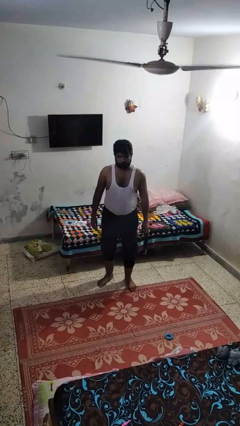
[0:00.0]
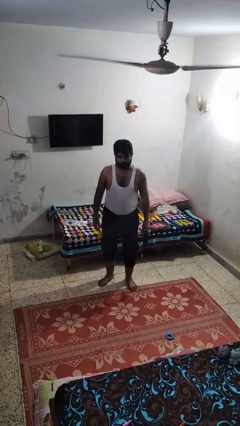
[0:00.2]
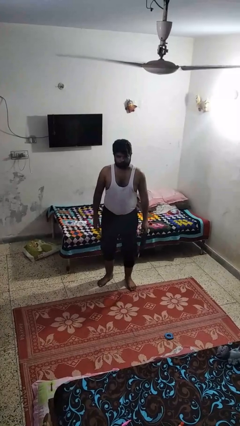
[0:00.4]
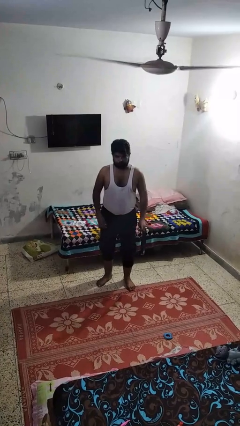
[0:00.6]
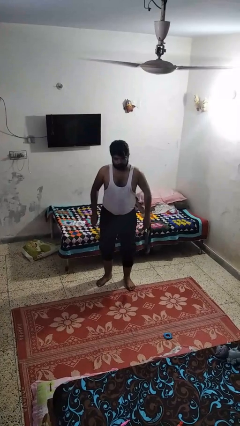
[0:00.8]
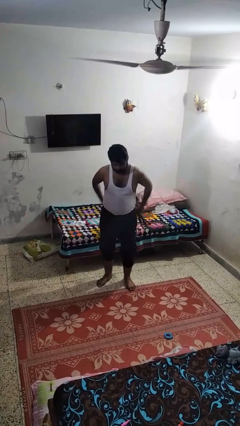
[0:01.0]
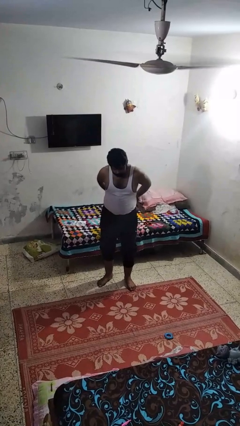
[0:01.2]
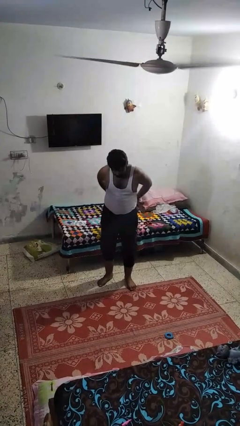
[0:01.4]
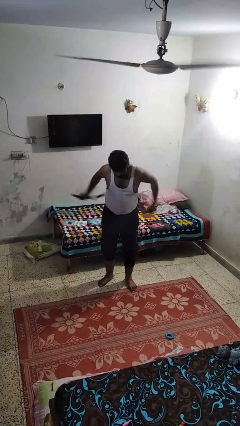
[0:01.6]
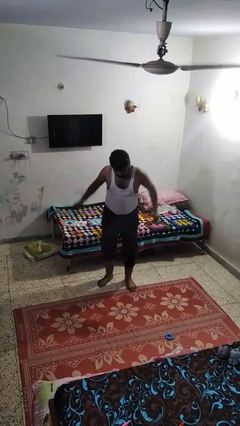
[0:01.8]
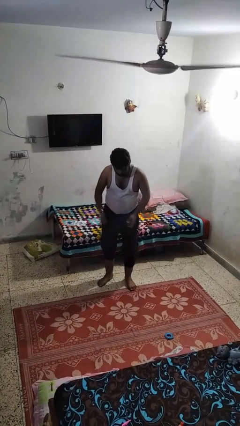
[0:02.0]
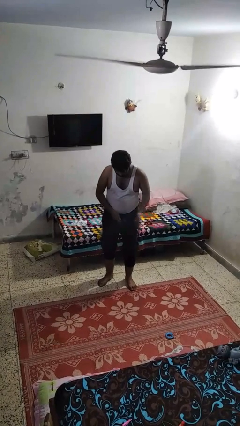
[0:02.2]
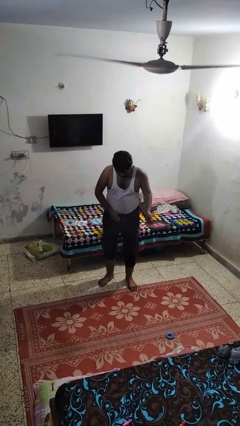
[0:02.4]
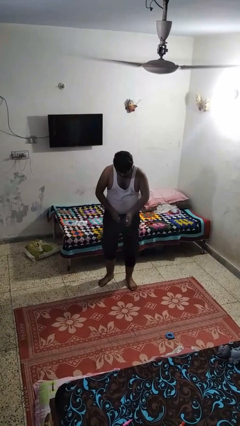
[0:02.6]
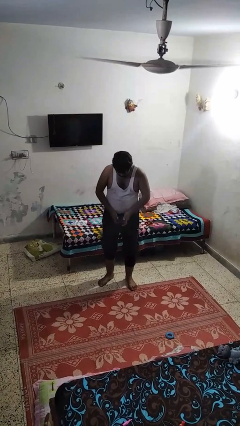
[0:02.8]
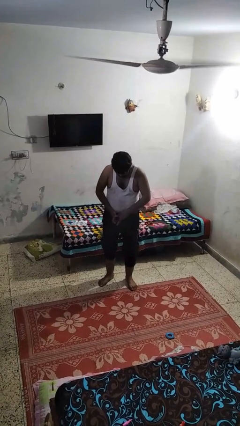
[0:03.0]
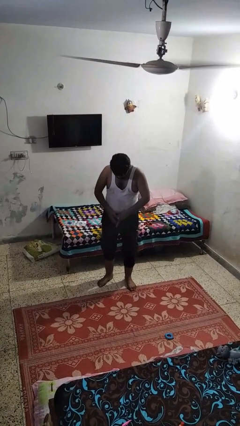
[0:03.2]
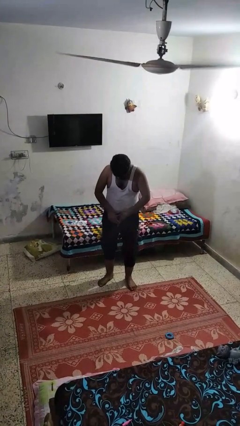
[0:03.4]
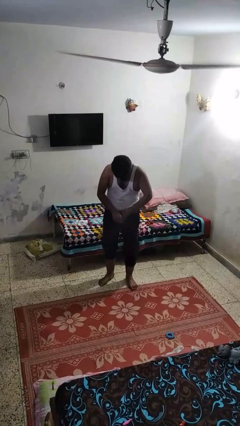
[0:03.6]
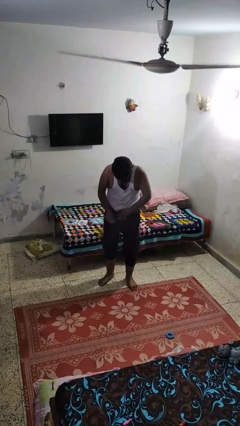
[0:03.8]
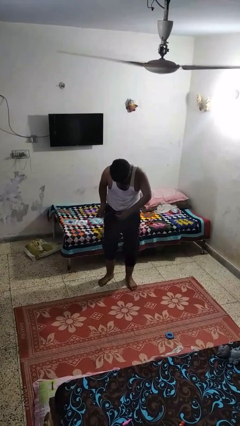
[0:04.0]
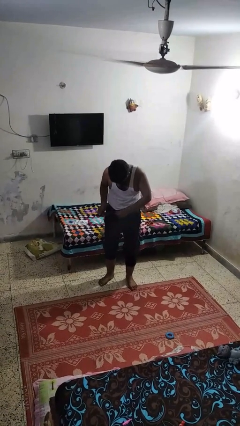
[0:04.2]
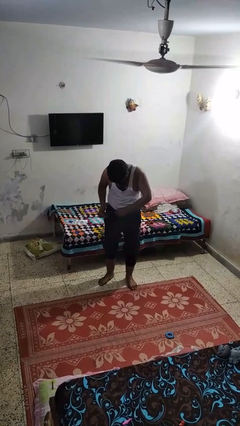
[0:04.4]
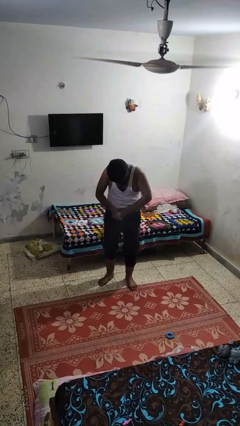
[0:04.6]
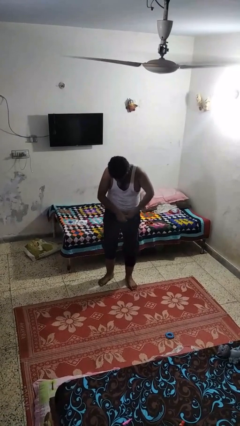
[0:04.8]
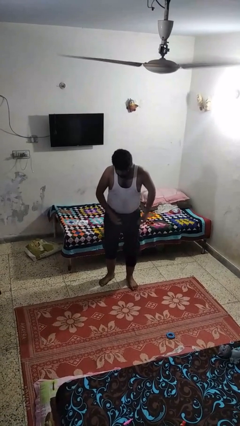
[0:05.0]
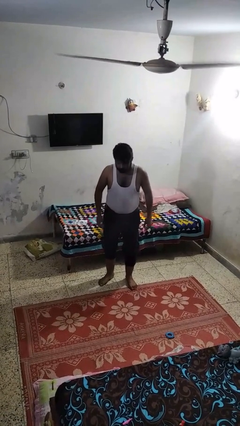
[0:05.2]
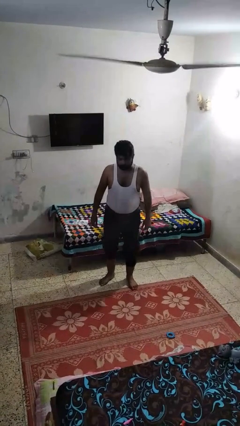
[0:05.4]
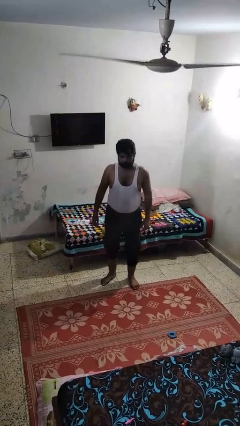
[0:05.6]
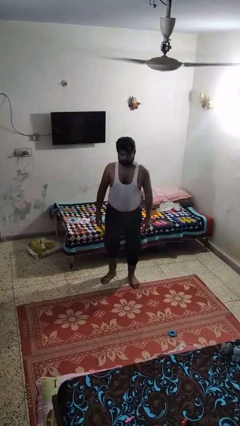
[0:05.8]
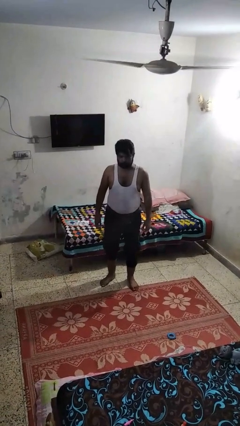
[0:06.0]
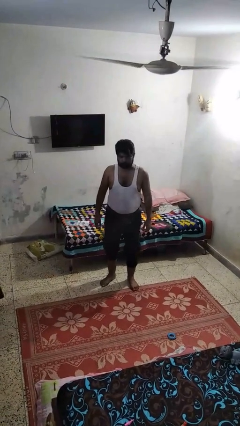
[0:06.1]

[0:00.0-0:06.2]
person puts on belt

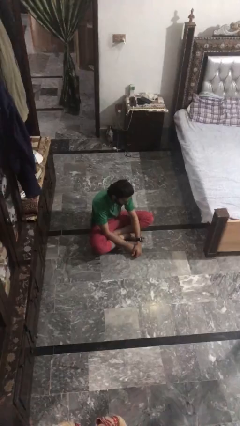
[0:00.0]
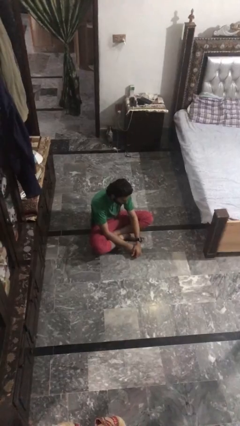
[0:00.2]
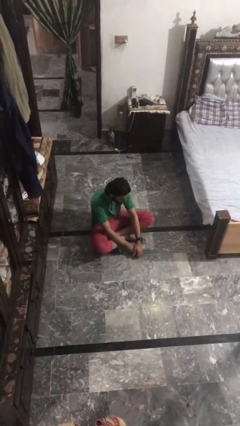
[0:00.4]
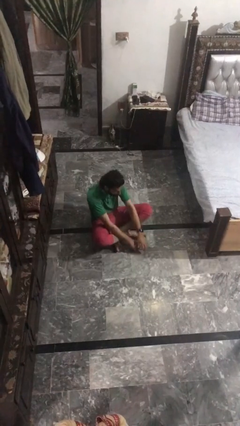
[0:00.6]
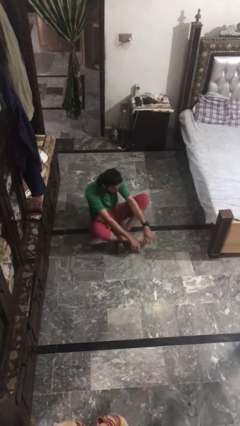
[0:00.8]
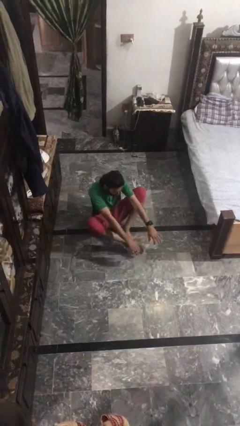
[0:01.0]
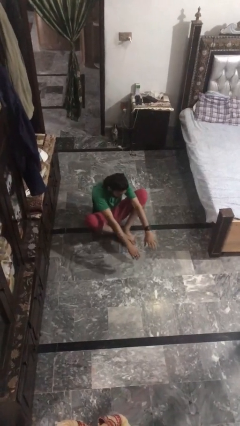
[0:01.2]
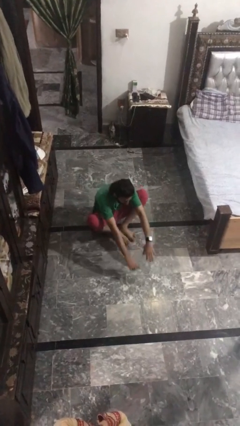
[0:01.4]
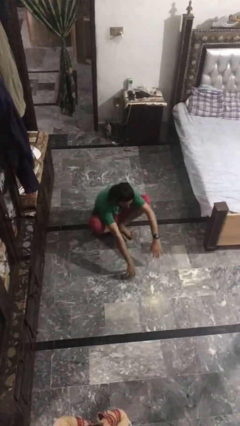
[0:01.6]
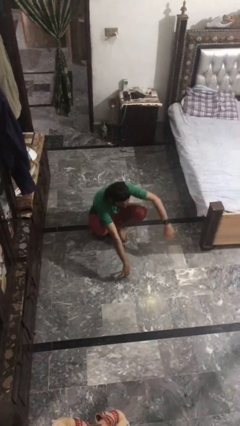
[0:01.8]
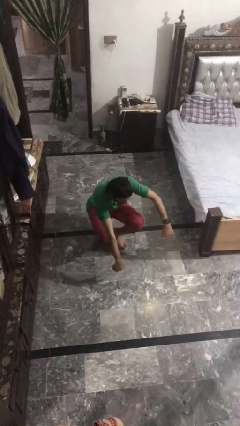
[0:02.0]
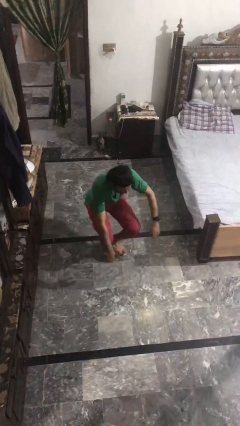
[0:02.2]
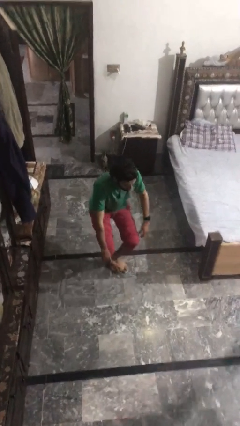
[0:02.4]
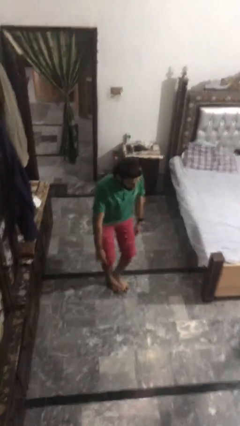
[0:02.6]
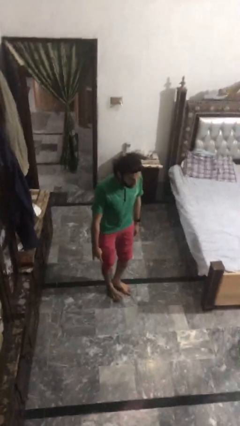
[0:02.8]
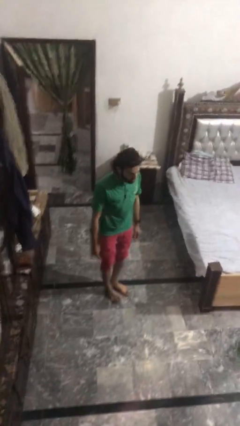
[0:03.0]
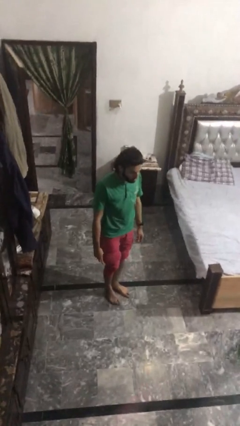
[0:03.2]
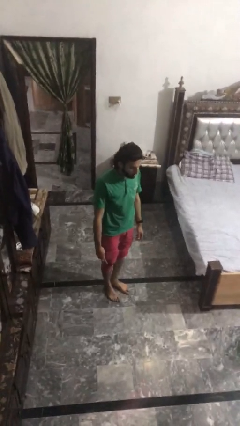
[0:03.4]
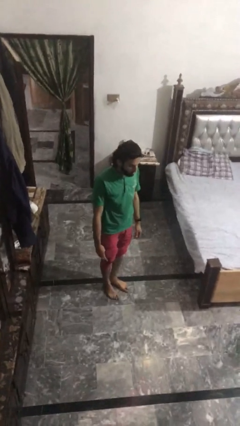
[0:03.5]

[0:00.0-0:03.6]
person stands up from floor

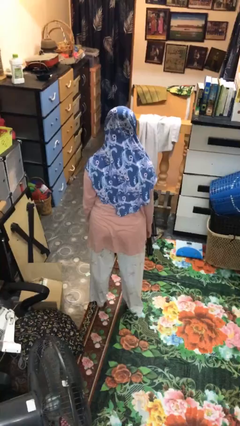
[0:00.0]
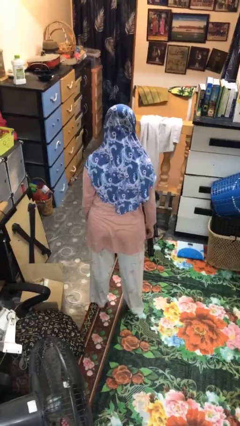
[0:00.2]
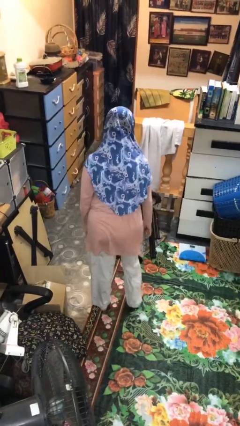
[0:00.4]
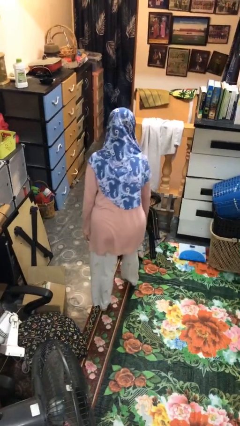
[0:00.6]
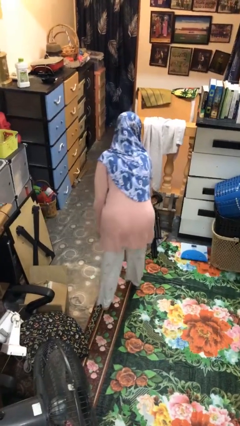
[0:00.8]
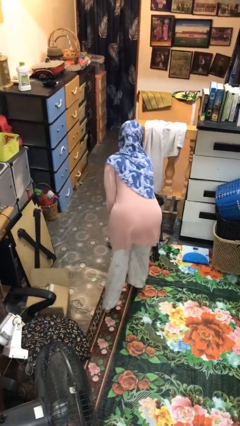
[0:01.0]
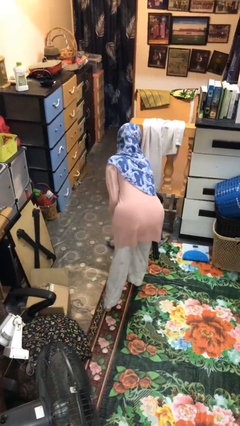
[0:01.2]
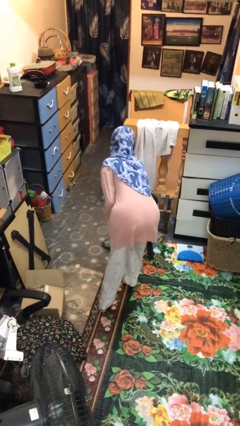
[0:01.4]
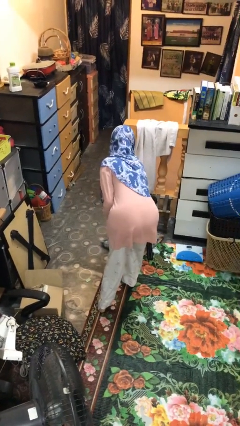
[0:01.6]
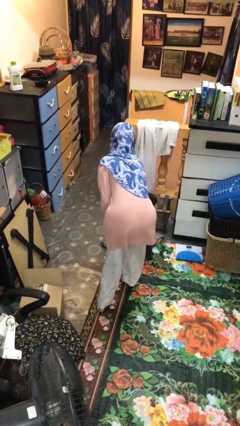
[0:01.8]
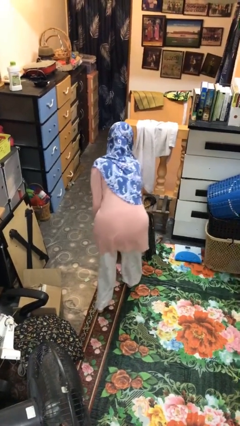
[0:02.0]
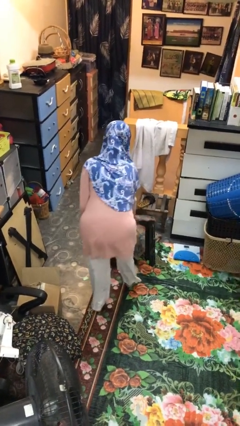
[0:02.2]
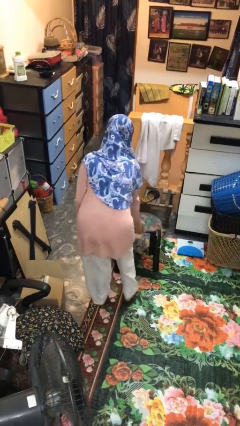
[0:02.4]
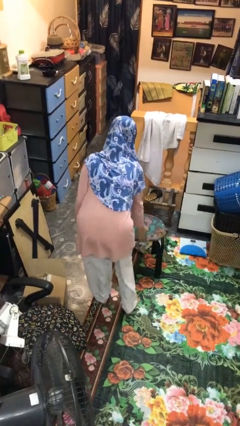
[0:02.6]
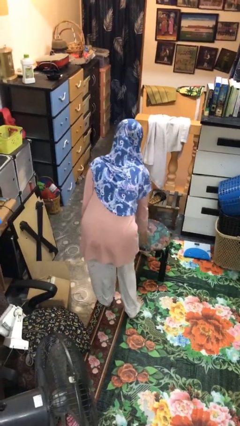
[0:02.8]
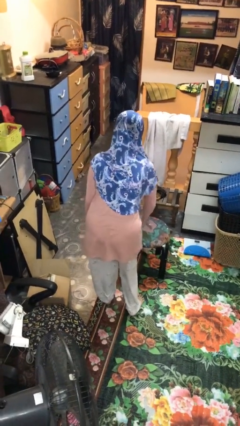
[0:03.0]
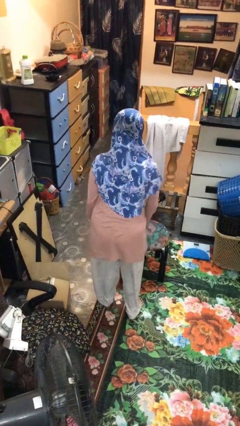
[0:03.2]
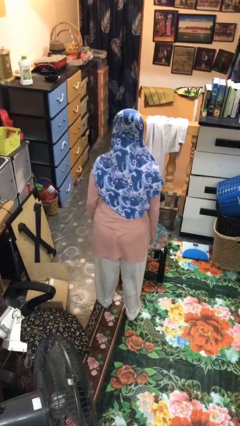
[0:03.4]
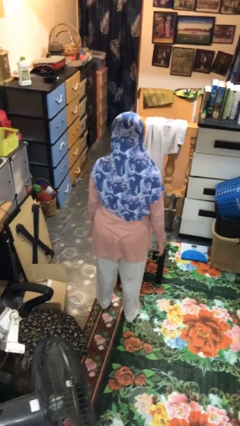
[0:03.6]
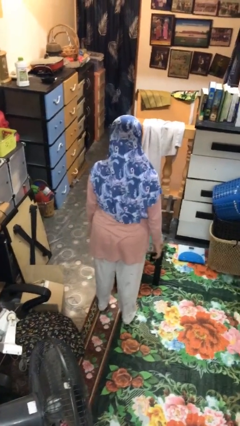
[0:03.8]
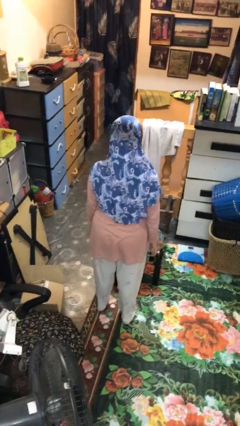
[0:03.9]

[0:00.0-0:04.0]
person sets upright furniture

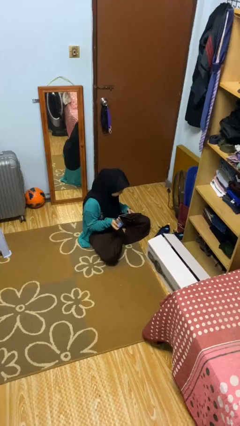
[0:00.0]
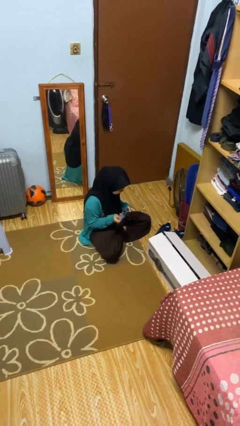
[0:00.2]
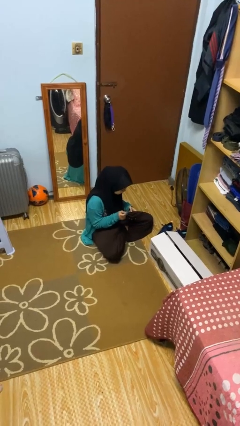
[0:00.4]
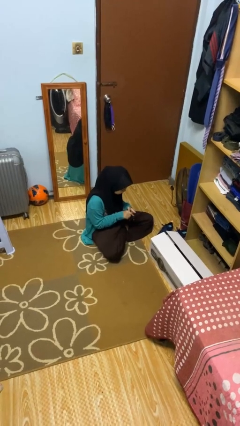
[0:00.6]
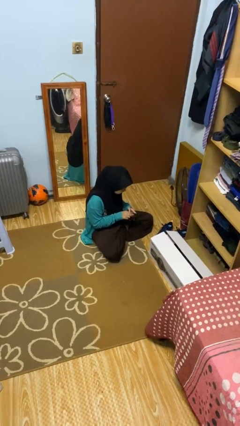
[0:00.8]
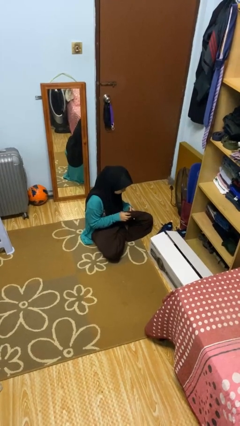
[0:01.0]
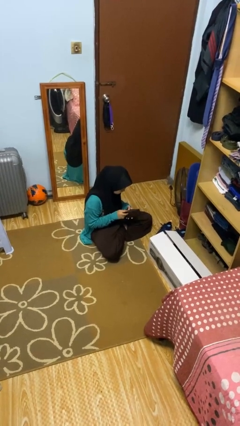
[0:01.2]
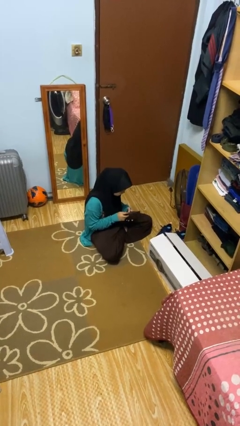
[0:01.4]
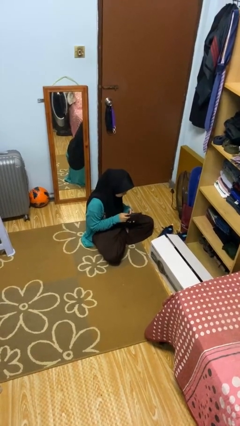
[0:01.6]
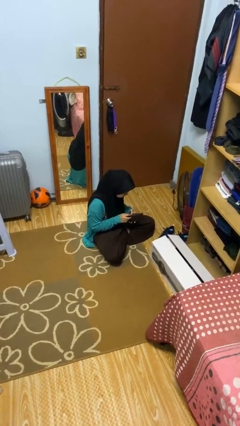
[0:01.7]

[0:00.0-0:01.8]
person puts object into purse

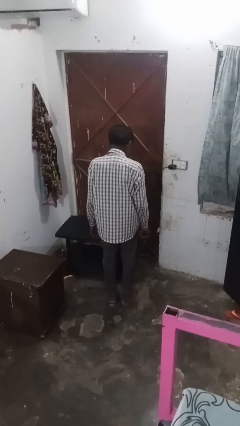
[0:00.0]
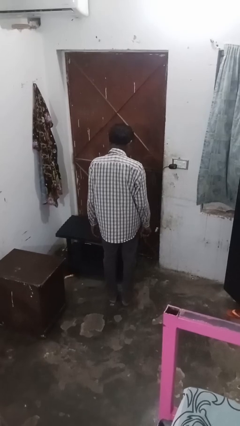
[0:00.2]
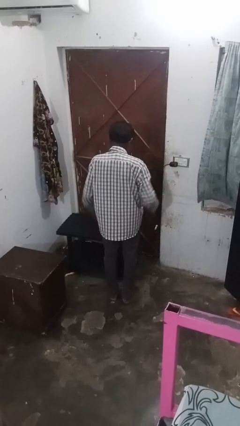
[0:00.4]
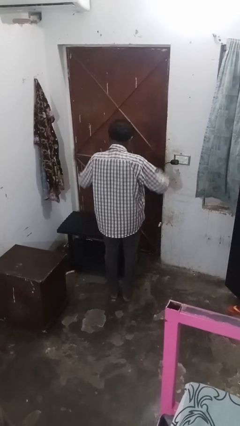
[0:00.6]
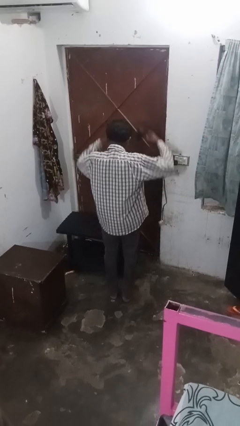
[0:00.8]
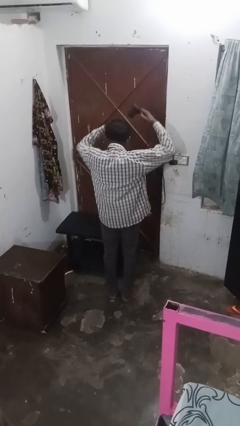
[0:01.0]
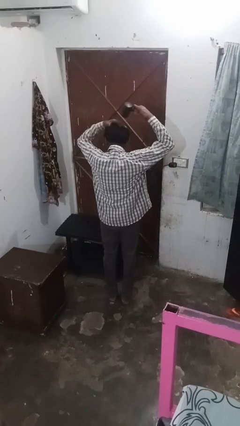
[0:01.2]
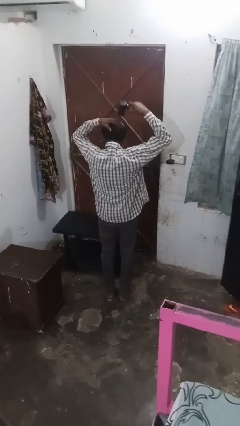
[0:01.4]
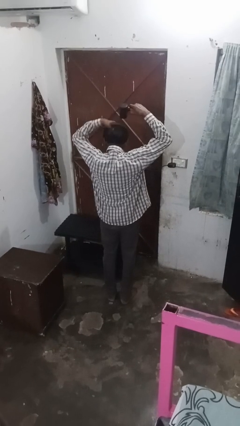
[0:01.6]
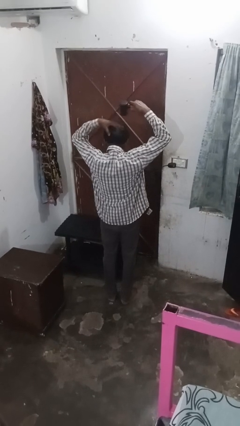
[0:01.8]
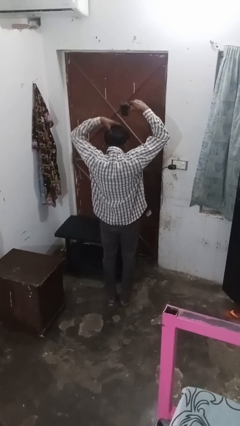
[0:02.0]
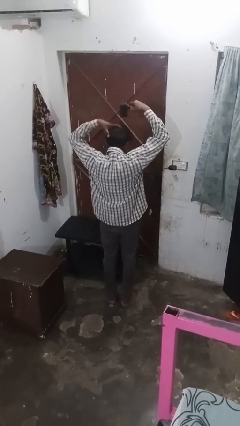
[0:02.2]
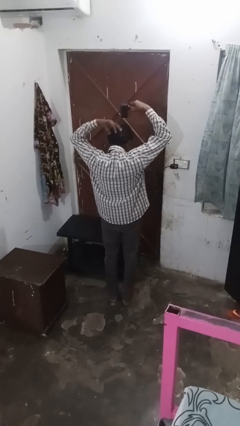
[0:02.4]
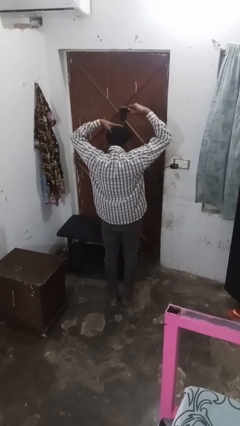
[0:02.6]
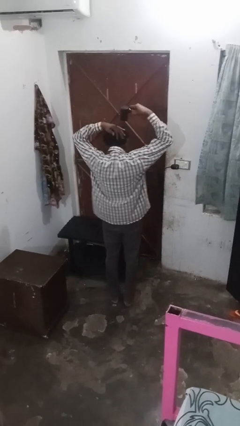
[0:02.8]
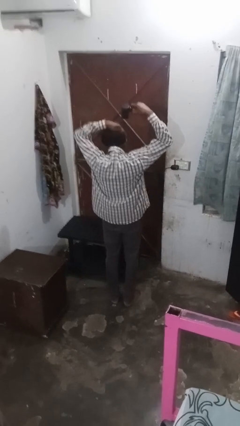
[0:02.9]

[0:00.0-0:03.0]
person dries hair with hairdryer
